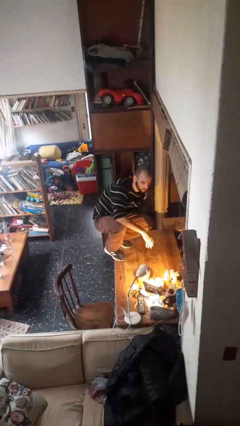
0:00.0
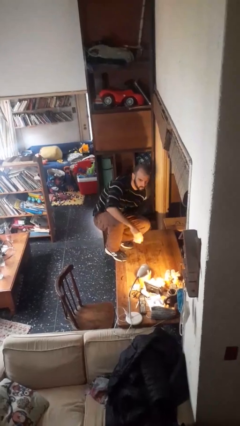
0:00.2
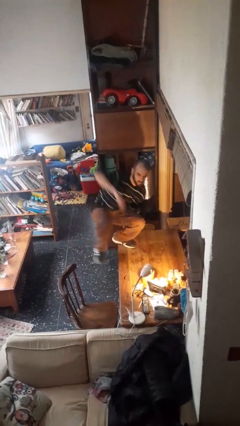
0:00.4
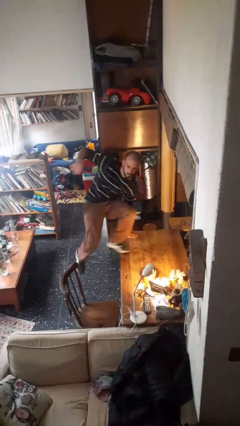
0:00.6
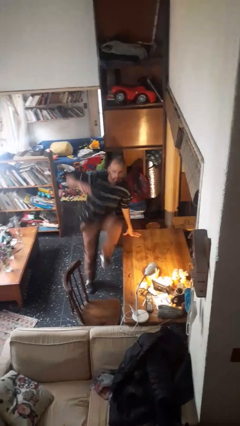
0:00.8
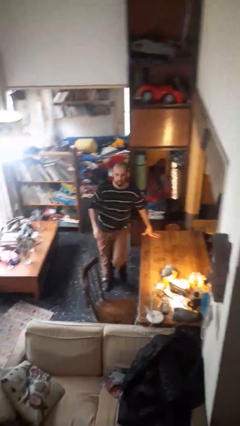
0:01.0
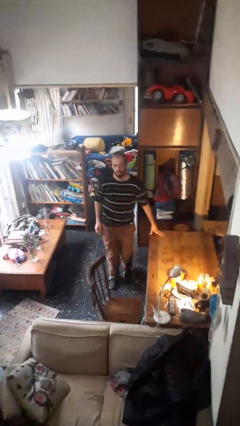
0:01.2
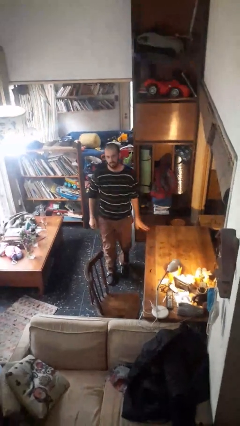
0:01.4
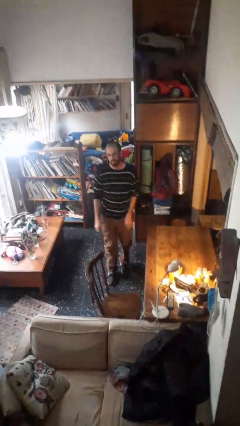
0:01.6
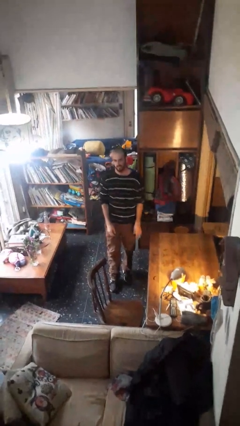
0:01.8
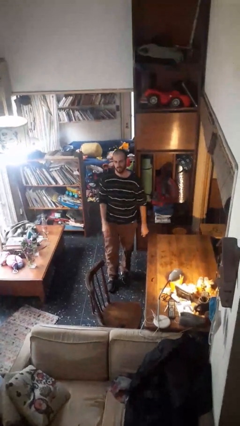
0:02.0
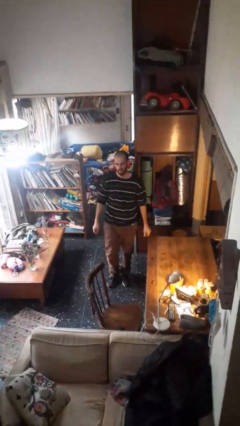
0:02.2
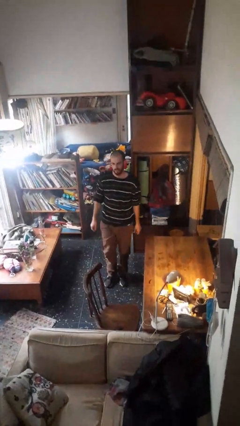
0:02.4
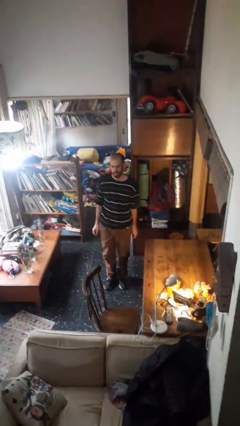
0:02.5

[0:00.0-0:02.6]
person climbs off table

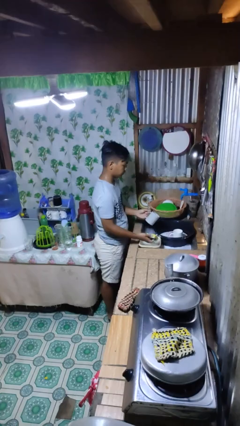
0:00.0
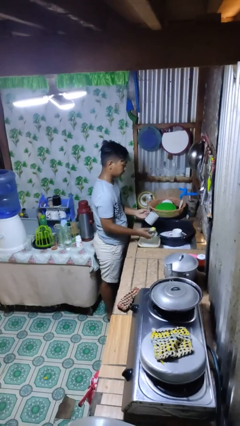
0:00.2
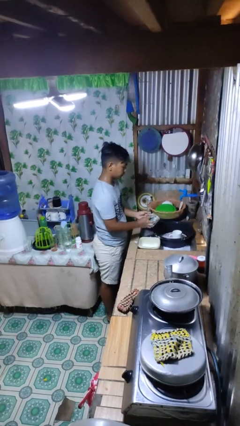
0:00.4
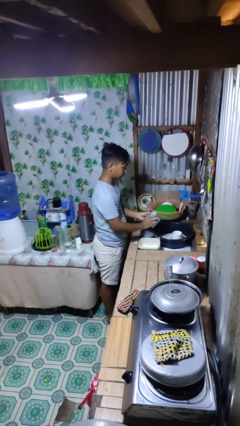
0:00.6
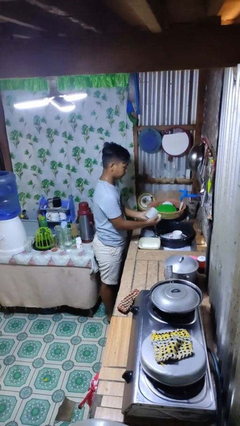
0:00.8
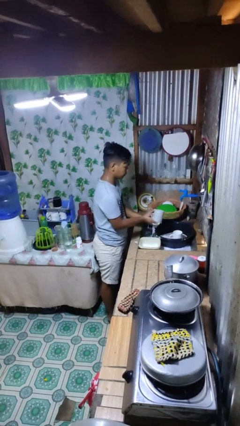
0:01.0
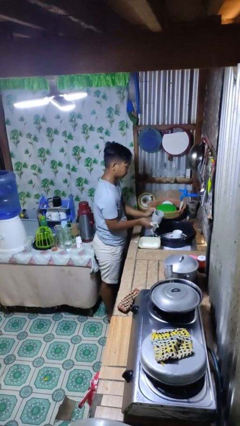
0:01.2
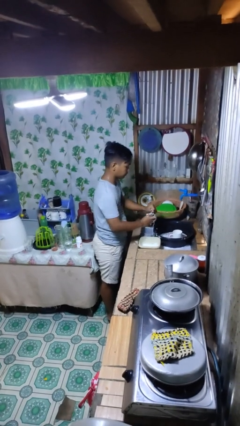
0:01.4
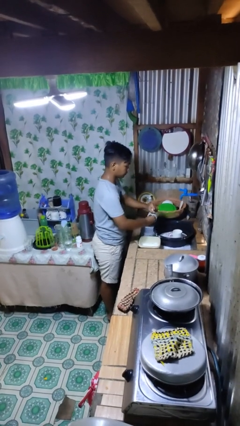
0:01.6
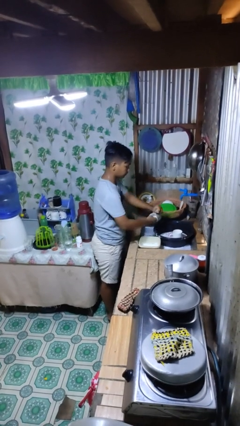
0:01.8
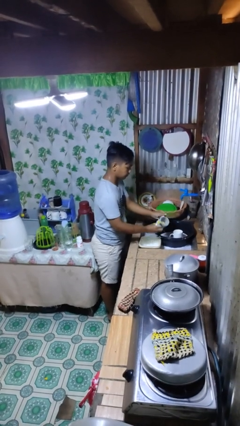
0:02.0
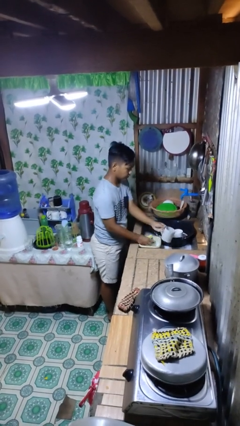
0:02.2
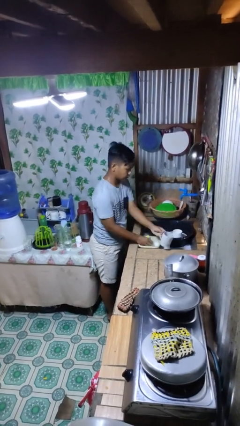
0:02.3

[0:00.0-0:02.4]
person washes dish

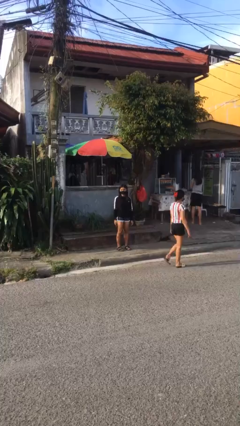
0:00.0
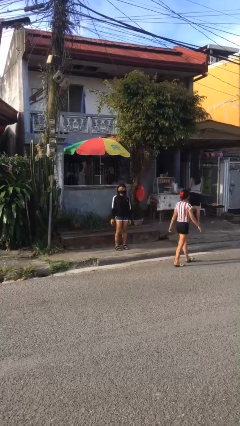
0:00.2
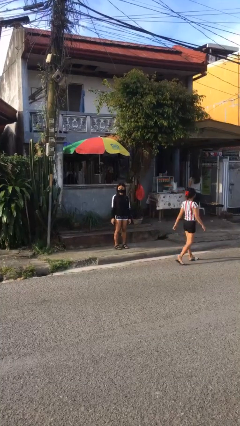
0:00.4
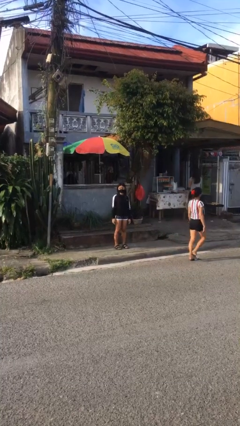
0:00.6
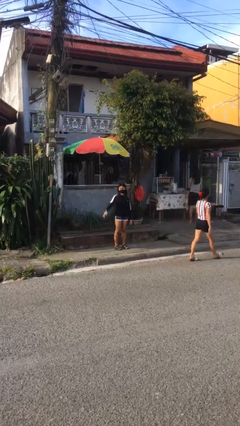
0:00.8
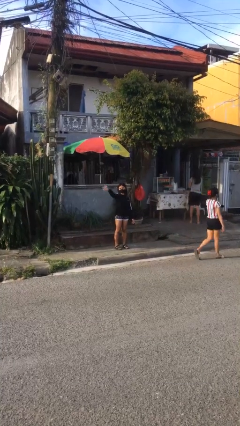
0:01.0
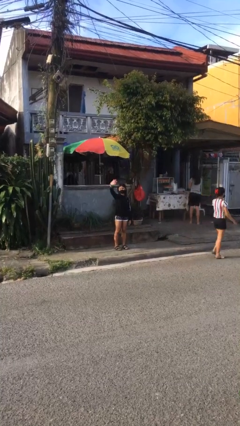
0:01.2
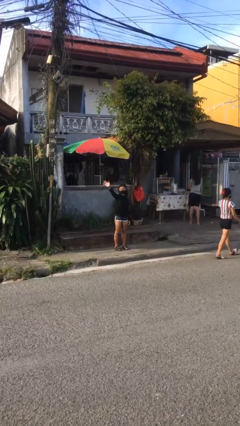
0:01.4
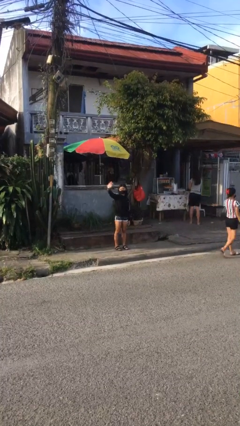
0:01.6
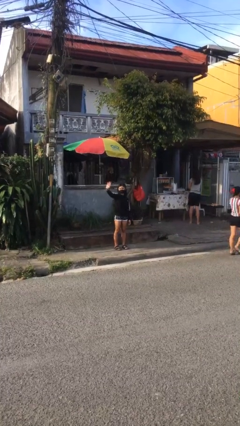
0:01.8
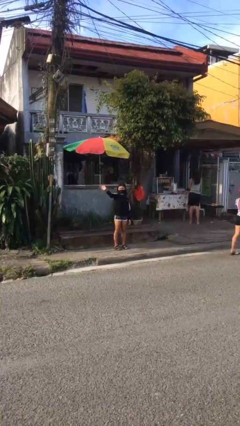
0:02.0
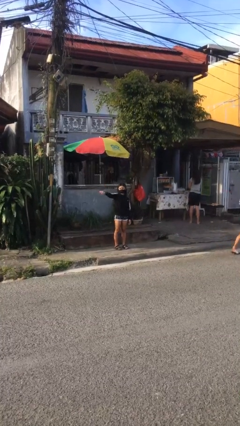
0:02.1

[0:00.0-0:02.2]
person waves at person

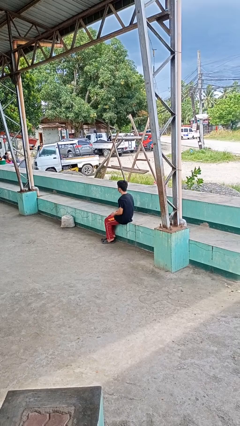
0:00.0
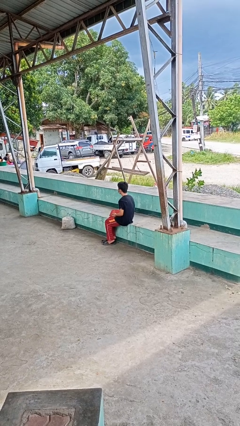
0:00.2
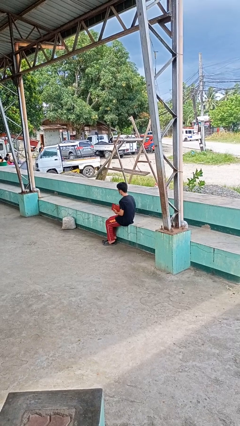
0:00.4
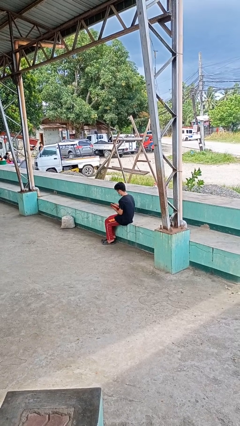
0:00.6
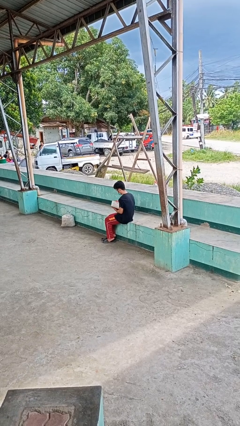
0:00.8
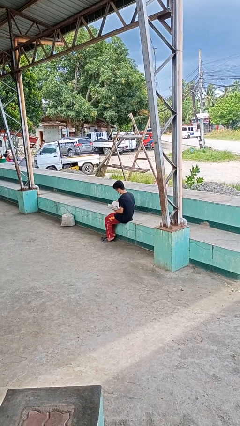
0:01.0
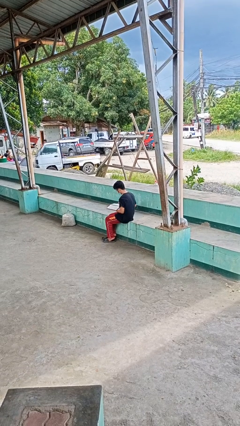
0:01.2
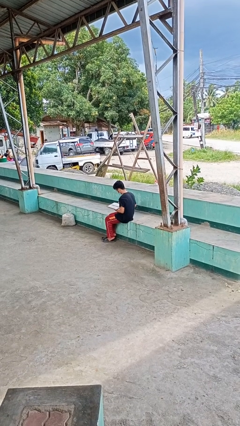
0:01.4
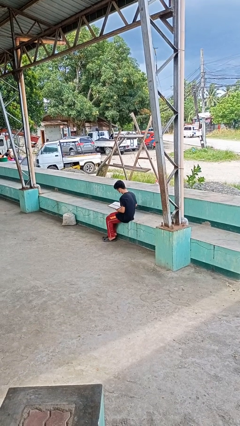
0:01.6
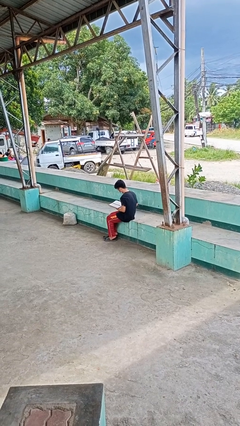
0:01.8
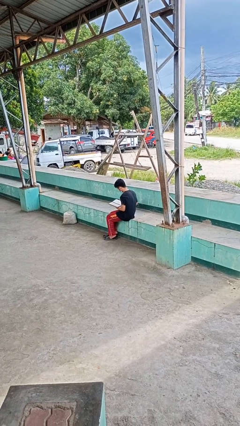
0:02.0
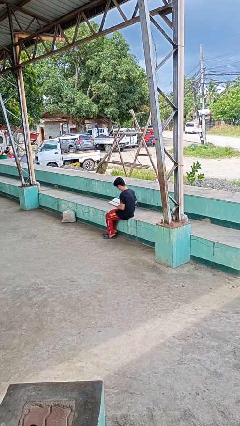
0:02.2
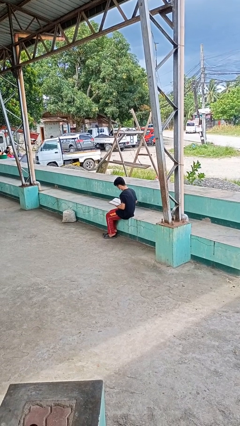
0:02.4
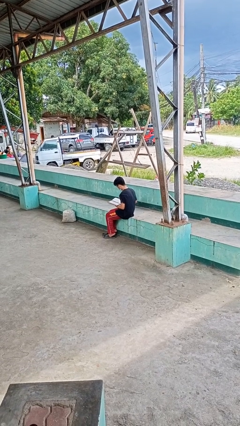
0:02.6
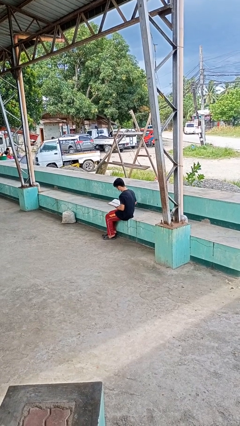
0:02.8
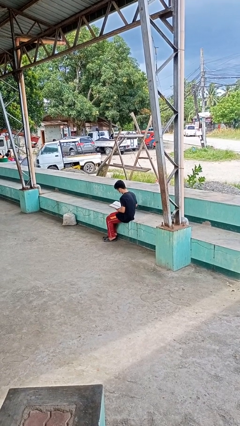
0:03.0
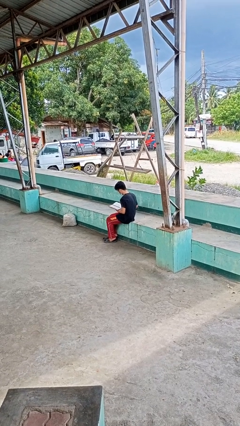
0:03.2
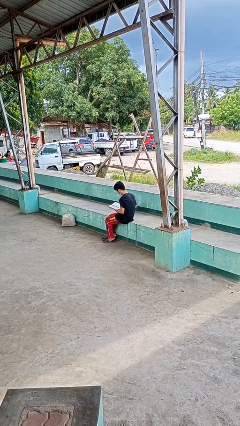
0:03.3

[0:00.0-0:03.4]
person reads book

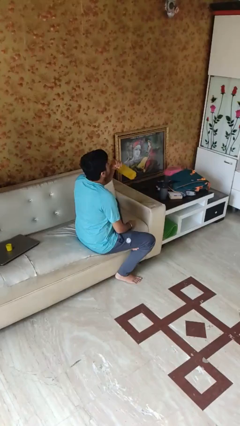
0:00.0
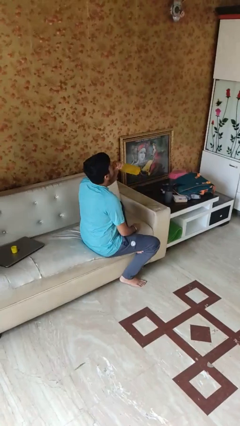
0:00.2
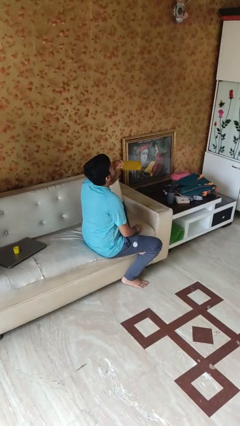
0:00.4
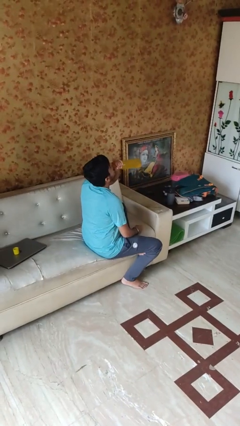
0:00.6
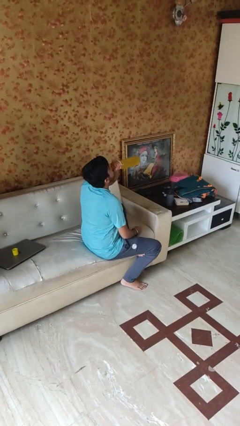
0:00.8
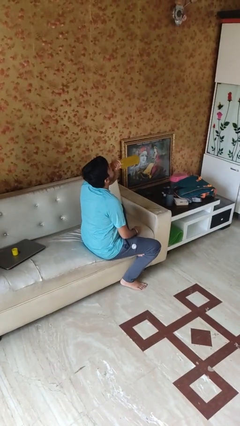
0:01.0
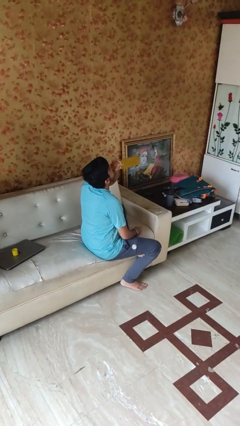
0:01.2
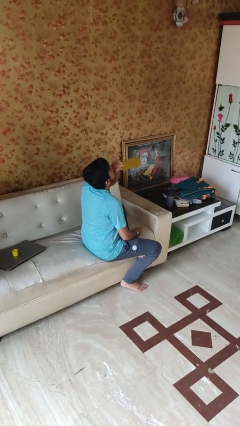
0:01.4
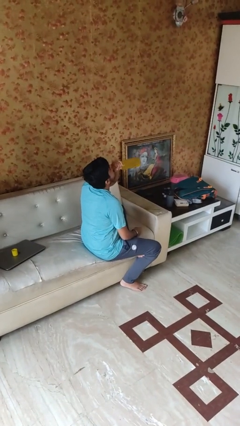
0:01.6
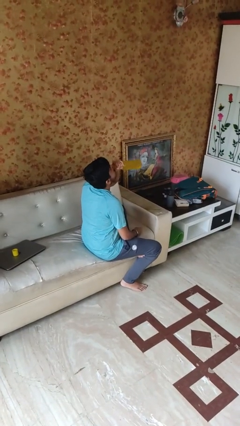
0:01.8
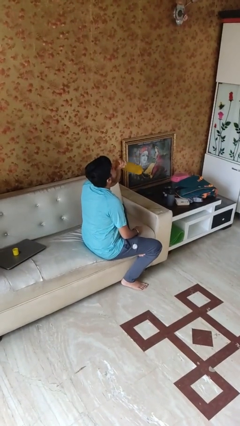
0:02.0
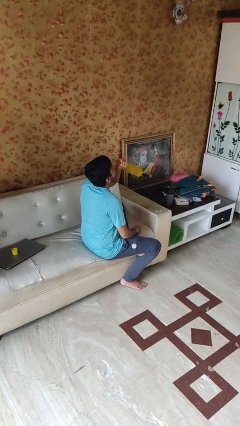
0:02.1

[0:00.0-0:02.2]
person drinks from bottle

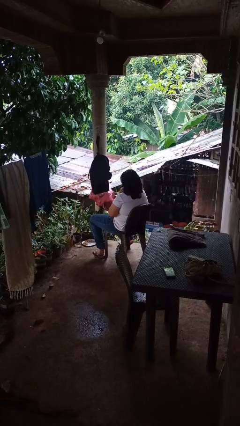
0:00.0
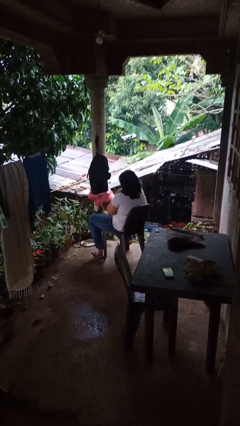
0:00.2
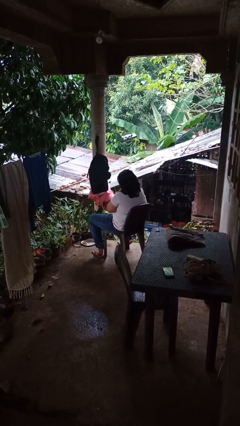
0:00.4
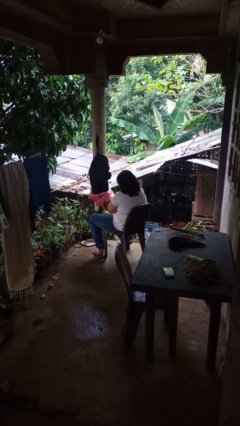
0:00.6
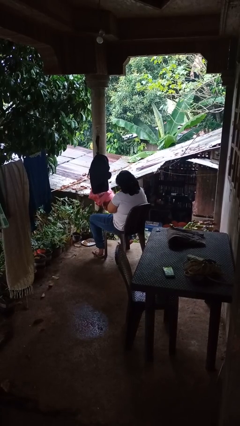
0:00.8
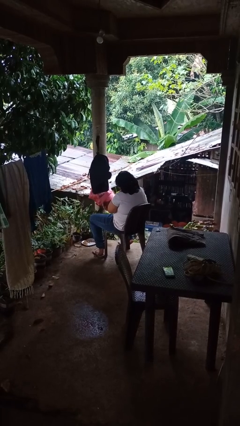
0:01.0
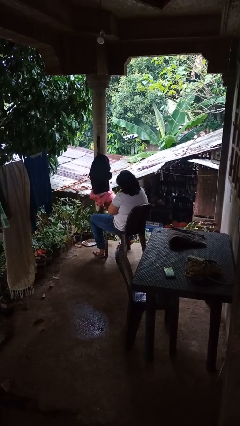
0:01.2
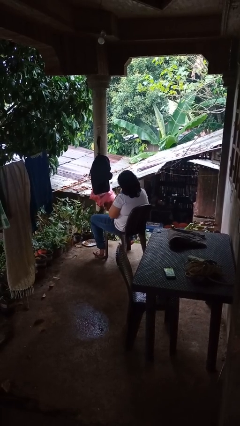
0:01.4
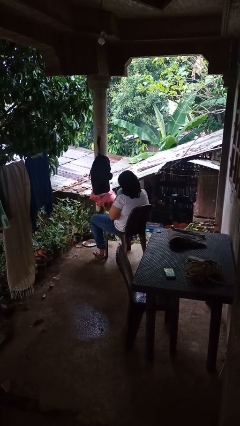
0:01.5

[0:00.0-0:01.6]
person hugs stuffed animal

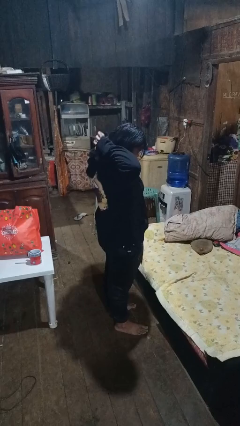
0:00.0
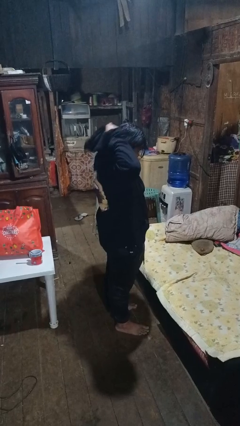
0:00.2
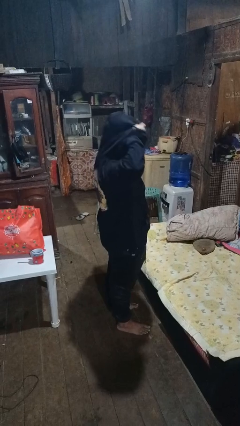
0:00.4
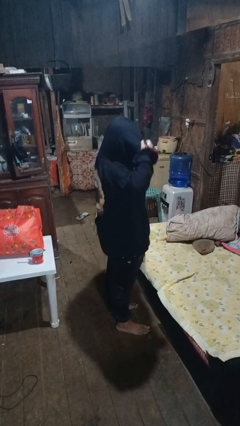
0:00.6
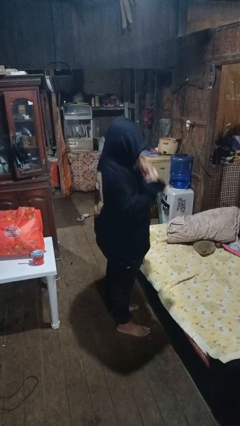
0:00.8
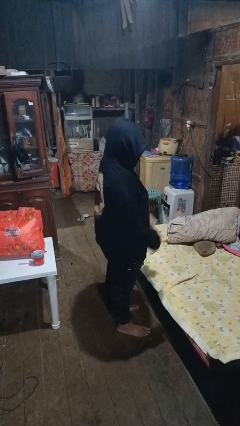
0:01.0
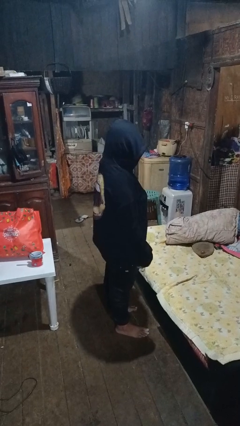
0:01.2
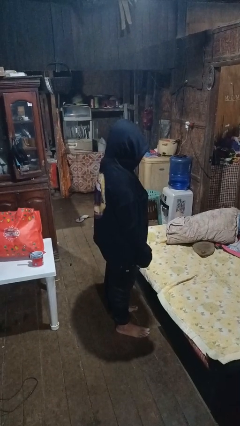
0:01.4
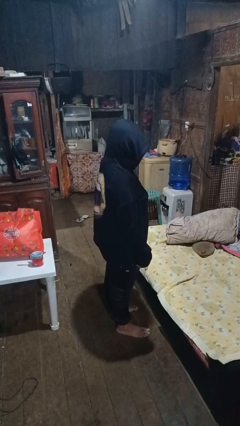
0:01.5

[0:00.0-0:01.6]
person puts on hoodie

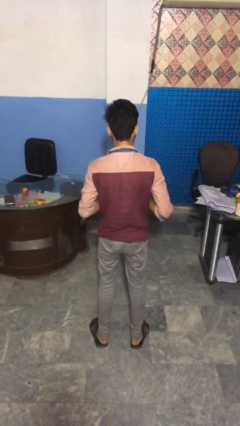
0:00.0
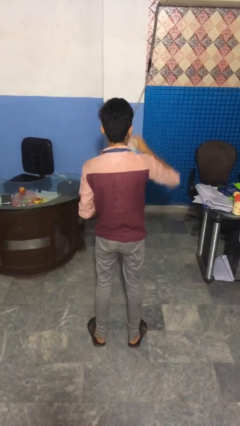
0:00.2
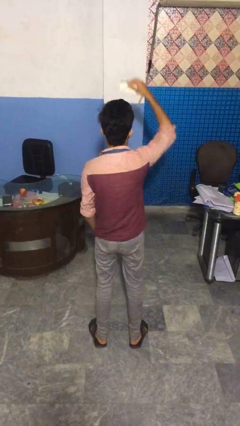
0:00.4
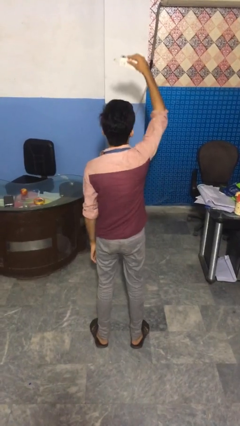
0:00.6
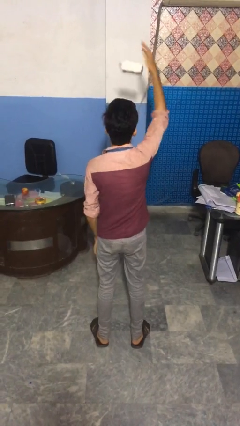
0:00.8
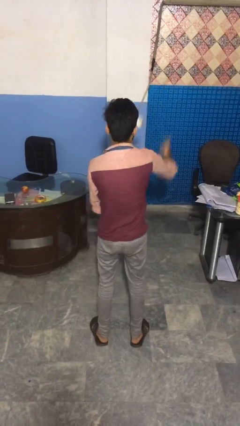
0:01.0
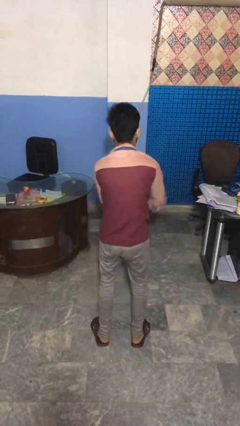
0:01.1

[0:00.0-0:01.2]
person drops object
